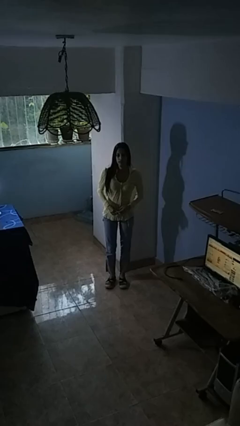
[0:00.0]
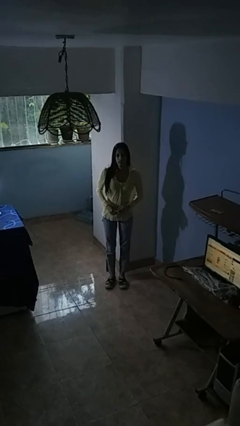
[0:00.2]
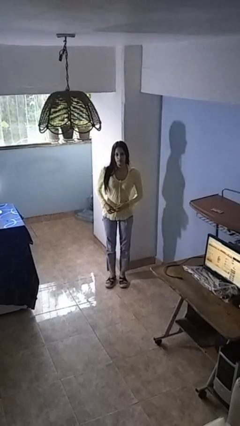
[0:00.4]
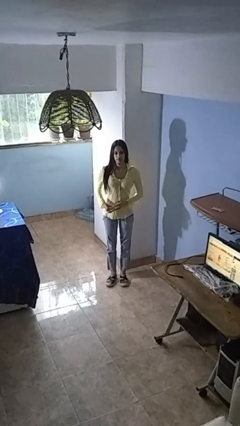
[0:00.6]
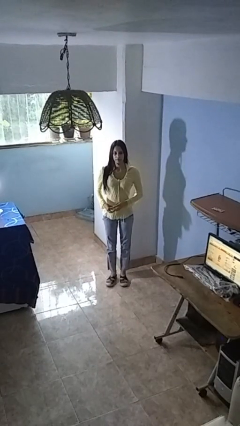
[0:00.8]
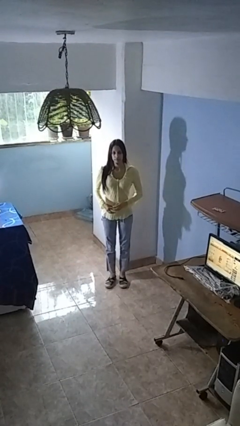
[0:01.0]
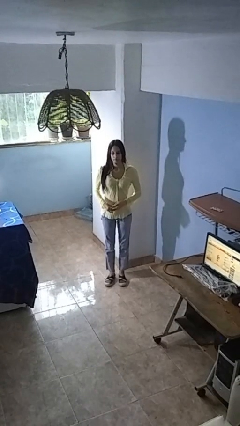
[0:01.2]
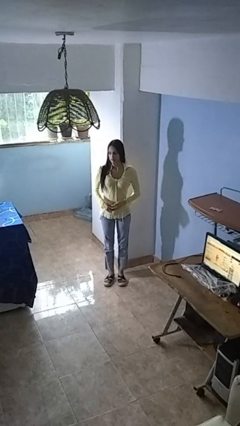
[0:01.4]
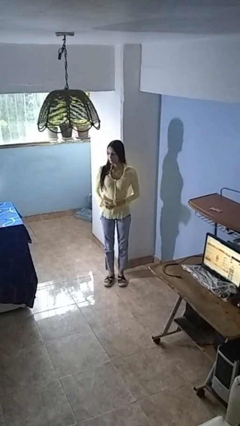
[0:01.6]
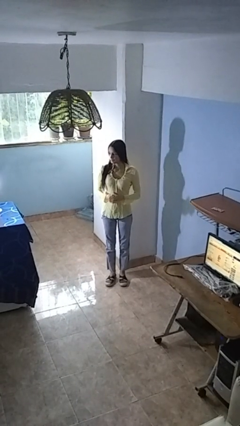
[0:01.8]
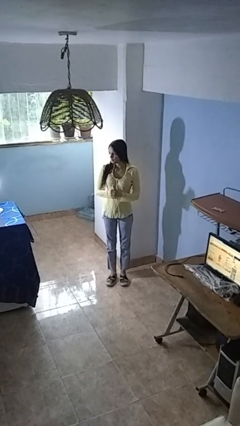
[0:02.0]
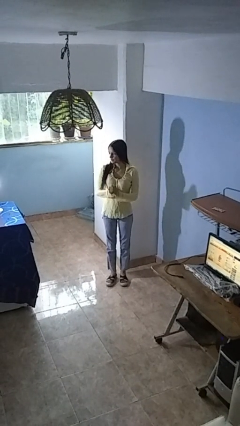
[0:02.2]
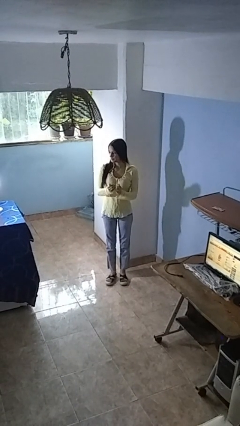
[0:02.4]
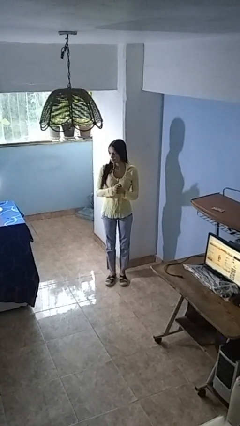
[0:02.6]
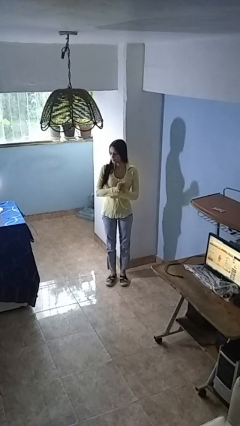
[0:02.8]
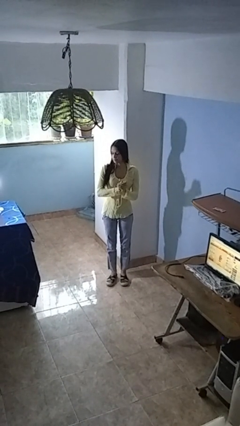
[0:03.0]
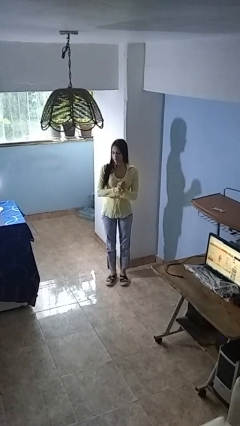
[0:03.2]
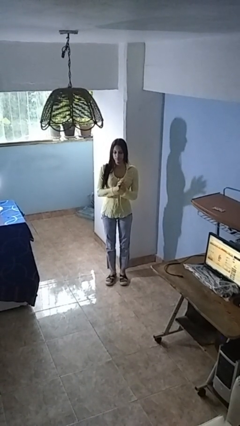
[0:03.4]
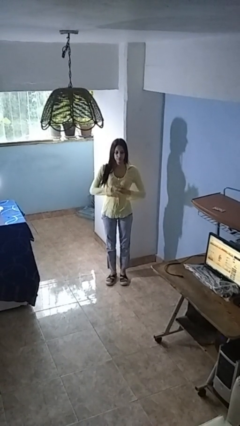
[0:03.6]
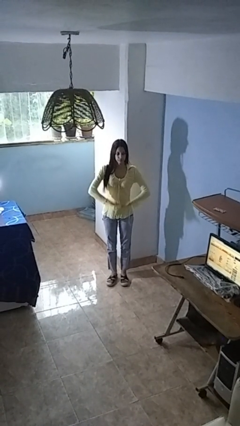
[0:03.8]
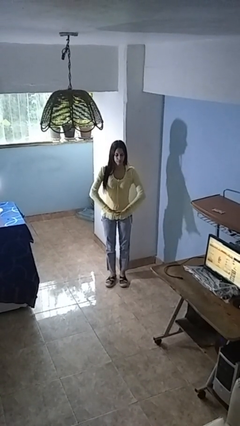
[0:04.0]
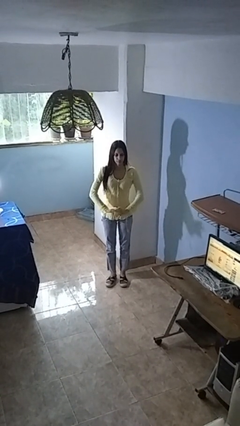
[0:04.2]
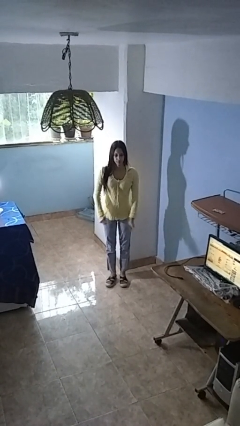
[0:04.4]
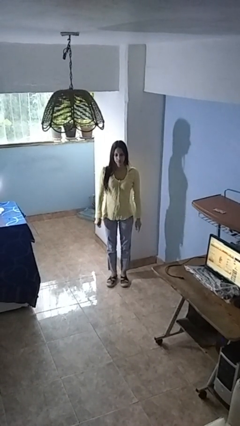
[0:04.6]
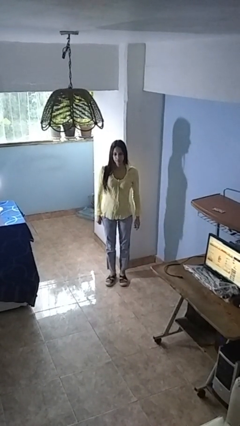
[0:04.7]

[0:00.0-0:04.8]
person cracks knuckles

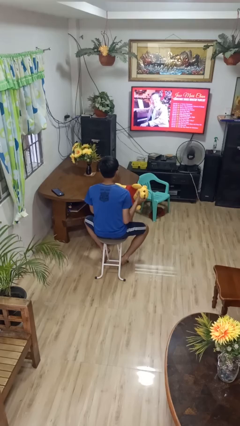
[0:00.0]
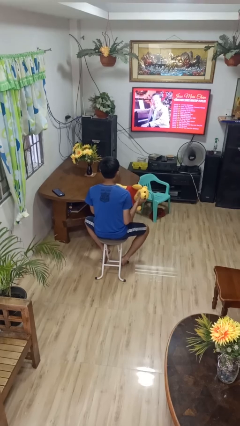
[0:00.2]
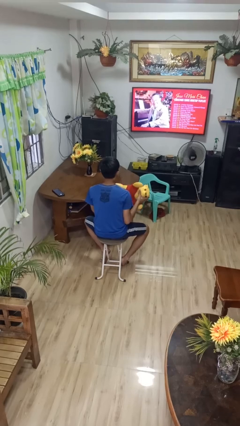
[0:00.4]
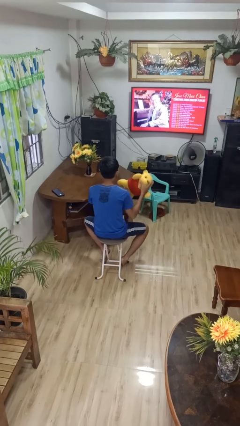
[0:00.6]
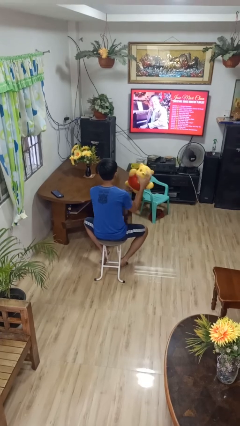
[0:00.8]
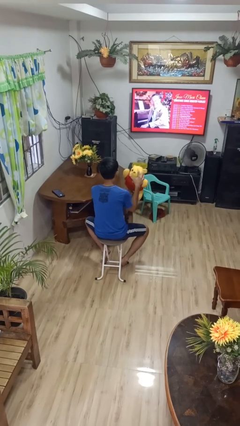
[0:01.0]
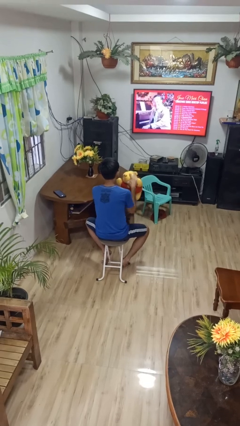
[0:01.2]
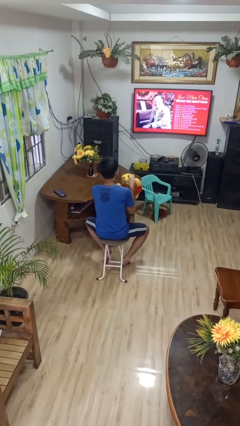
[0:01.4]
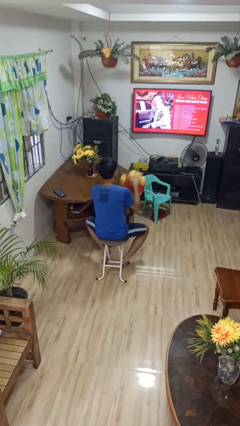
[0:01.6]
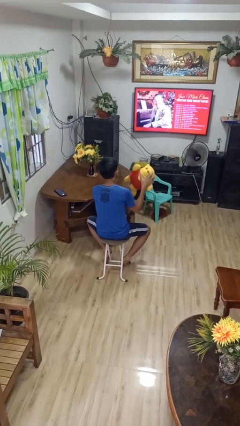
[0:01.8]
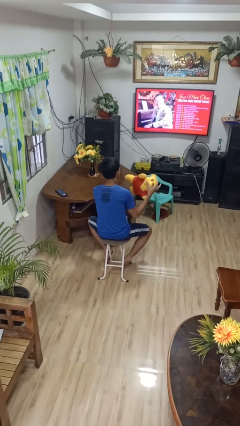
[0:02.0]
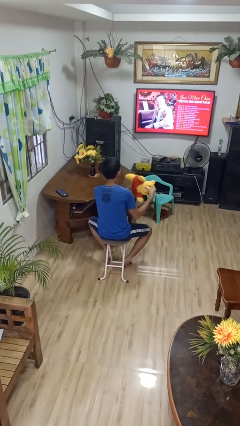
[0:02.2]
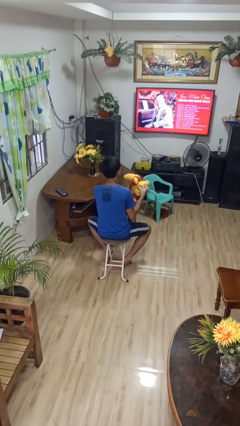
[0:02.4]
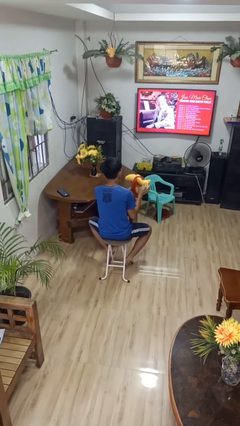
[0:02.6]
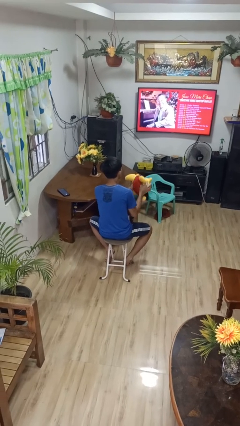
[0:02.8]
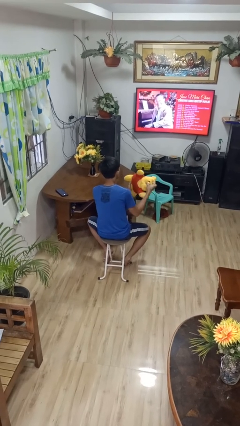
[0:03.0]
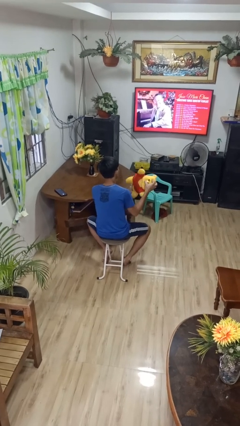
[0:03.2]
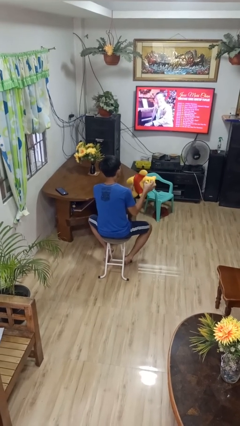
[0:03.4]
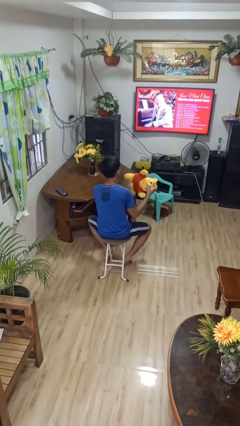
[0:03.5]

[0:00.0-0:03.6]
person squeezes object

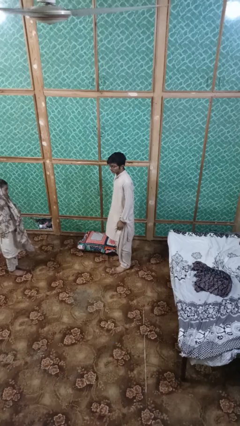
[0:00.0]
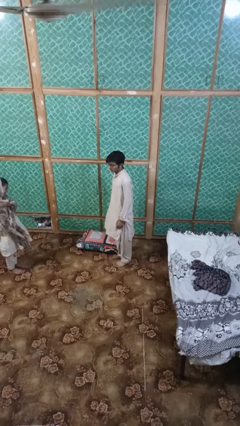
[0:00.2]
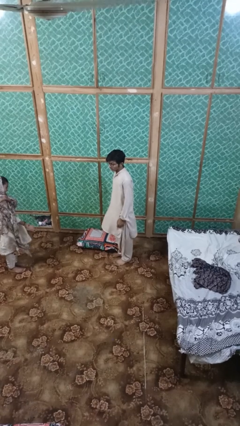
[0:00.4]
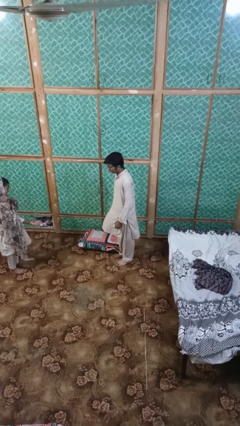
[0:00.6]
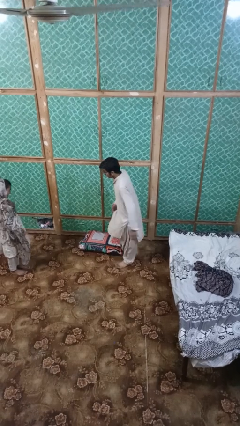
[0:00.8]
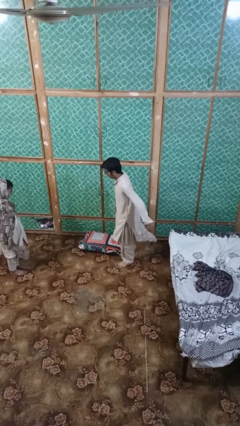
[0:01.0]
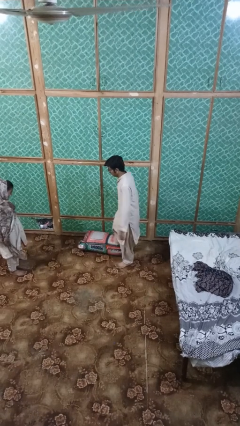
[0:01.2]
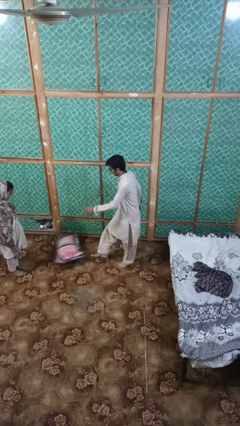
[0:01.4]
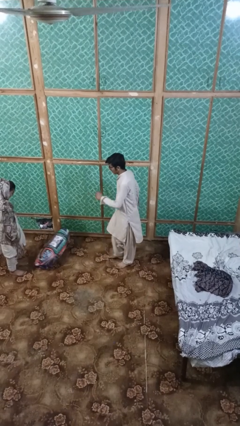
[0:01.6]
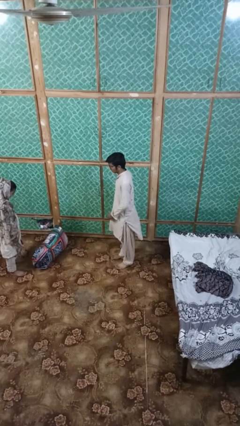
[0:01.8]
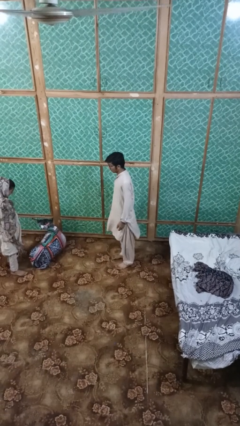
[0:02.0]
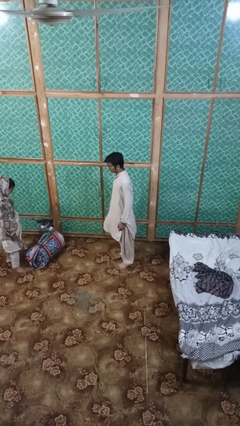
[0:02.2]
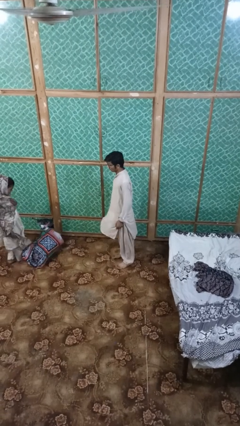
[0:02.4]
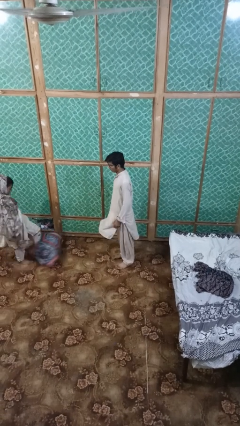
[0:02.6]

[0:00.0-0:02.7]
person kicks object to person

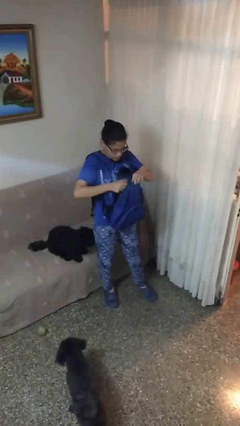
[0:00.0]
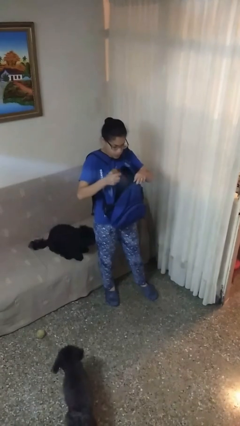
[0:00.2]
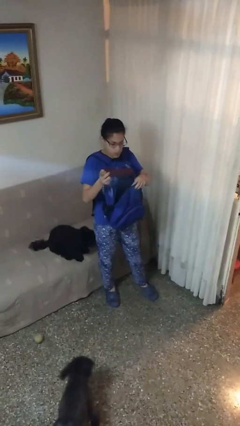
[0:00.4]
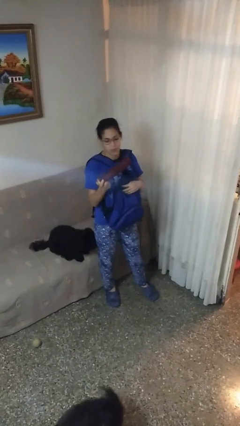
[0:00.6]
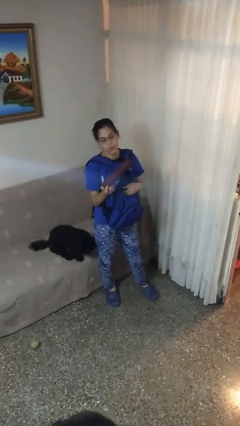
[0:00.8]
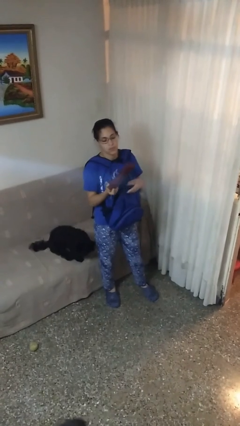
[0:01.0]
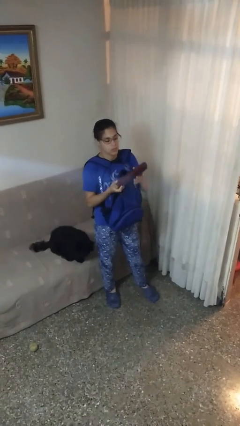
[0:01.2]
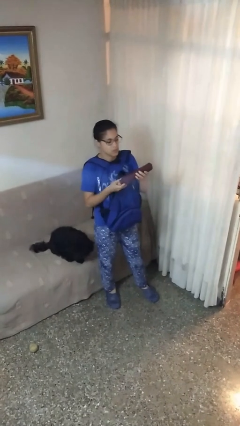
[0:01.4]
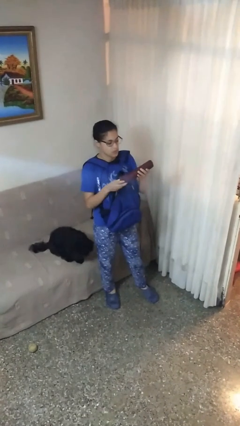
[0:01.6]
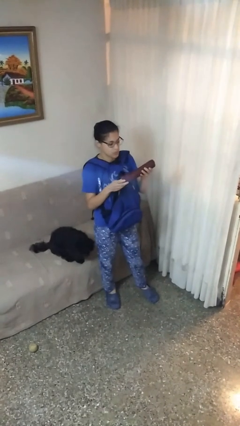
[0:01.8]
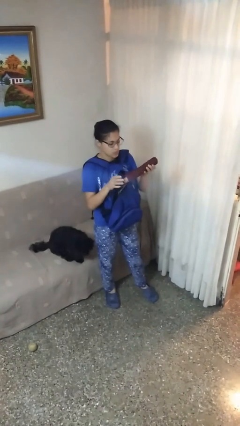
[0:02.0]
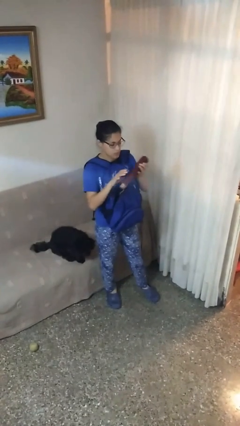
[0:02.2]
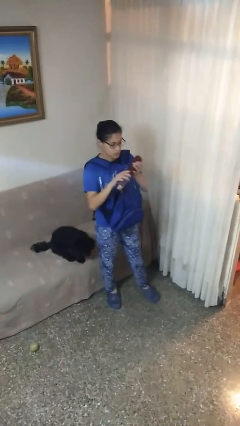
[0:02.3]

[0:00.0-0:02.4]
person takes object from backpack

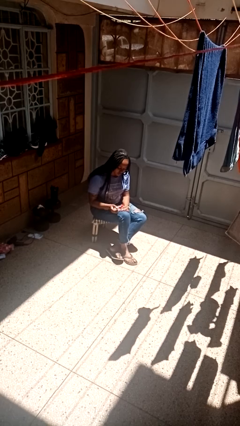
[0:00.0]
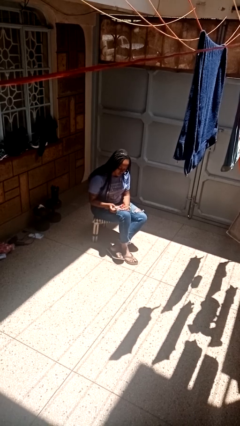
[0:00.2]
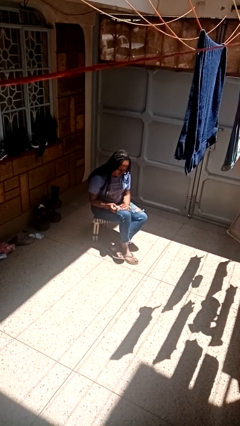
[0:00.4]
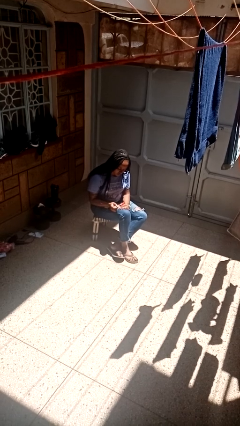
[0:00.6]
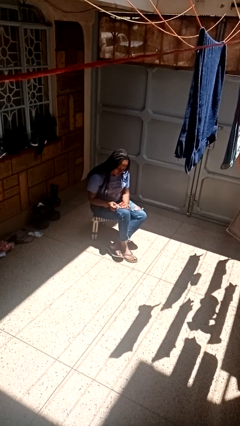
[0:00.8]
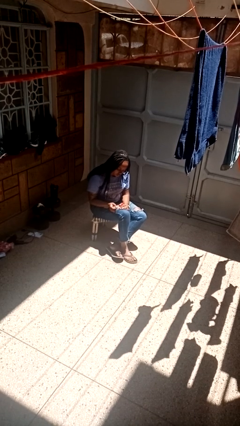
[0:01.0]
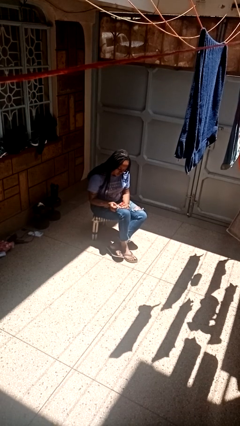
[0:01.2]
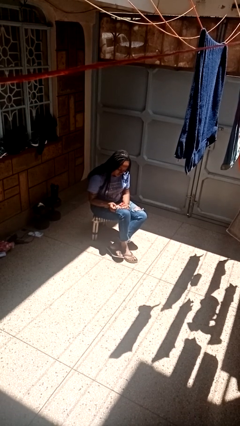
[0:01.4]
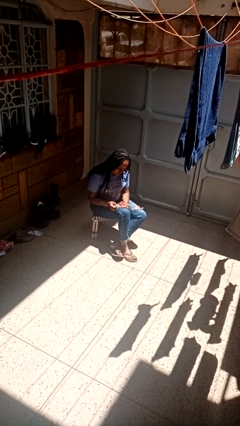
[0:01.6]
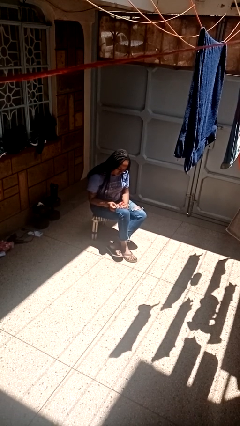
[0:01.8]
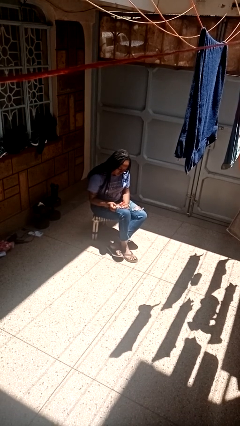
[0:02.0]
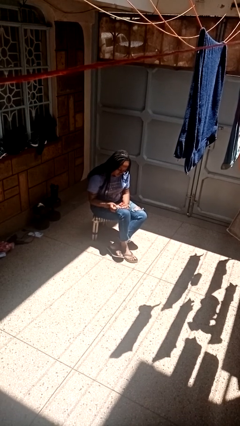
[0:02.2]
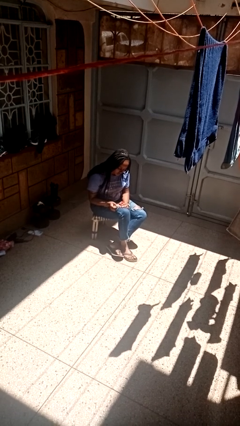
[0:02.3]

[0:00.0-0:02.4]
person paints fingernails

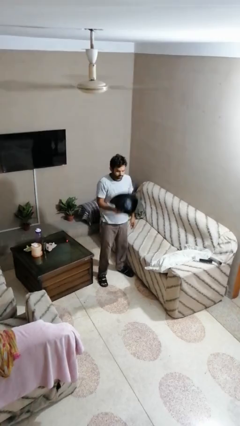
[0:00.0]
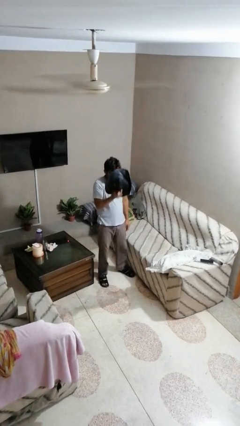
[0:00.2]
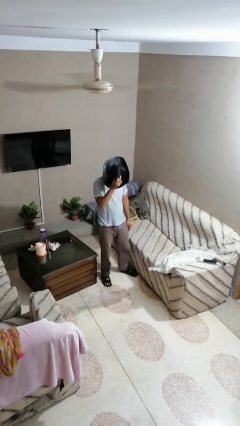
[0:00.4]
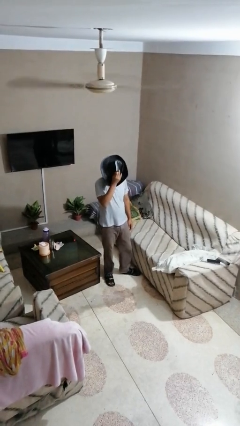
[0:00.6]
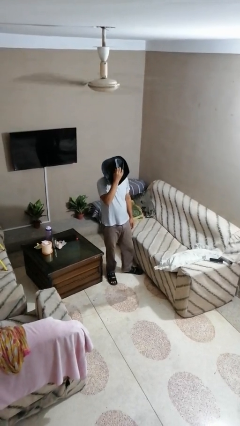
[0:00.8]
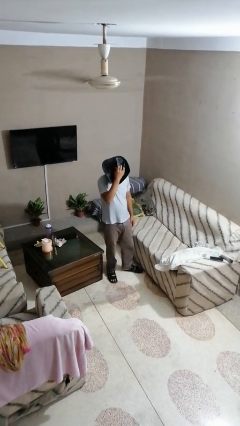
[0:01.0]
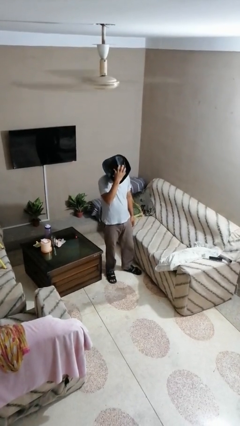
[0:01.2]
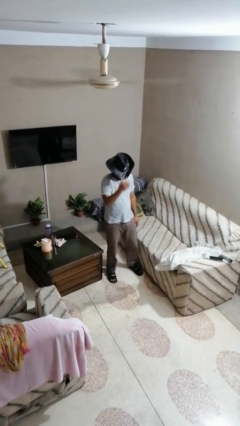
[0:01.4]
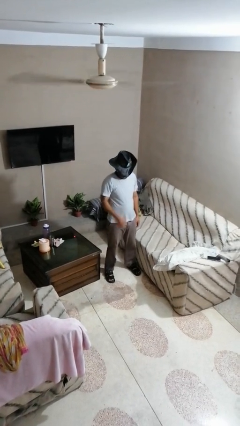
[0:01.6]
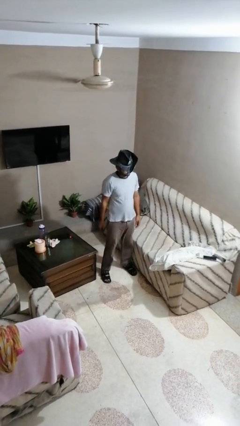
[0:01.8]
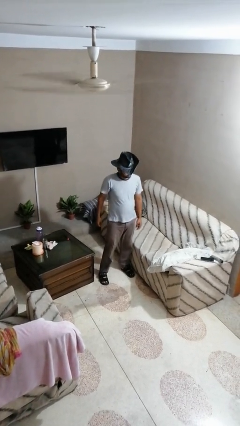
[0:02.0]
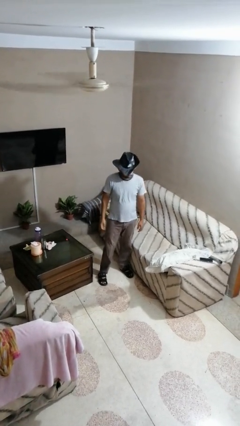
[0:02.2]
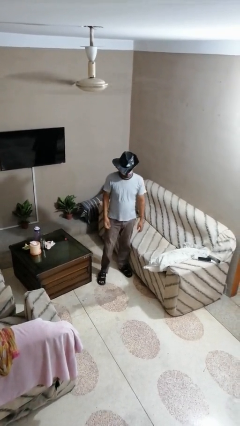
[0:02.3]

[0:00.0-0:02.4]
person puts on hat
